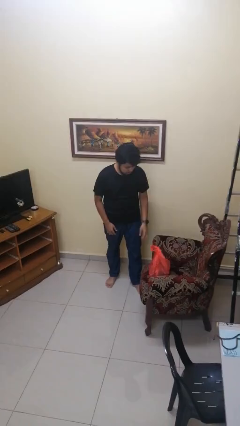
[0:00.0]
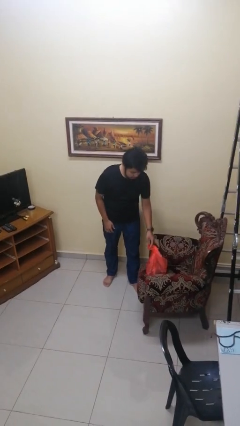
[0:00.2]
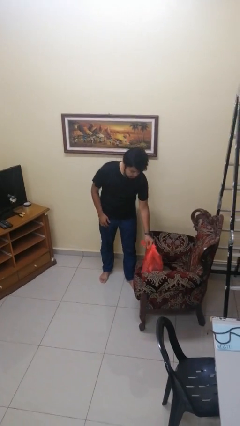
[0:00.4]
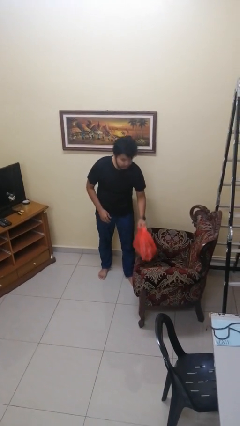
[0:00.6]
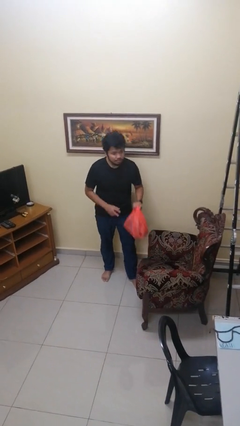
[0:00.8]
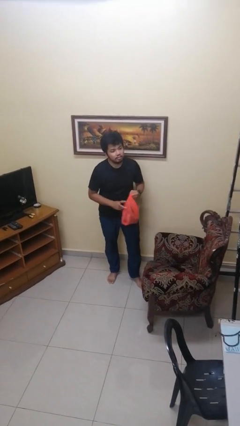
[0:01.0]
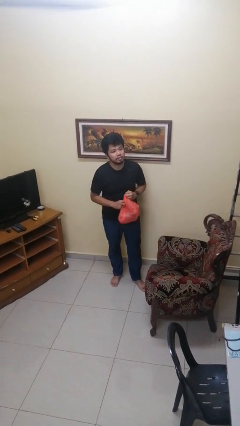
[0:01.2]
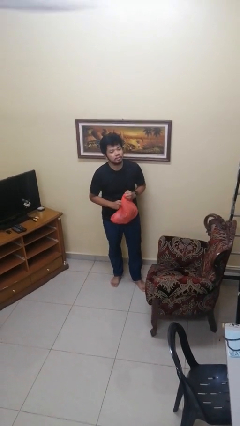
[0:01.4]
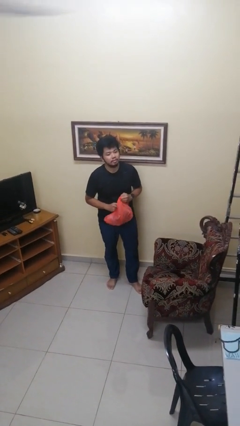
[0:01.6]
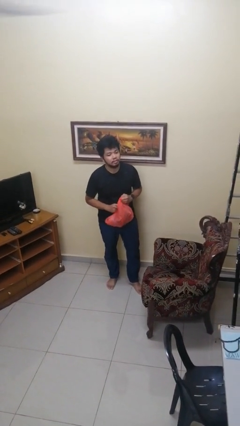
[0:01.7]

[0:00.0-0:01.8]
person picks up object from couch

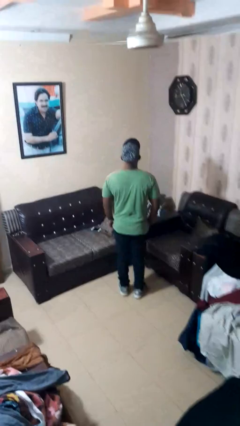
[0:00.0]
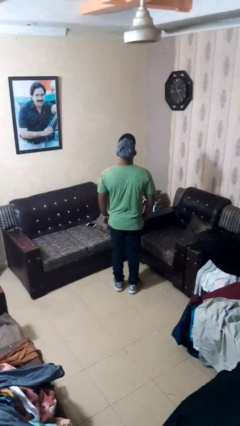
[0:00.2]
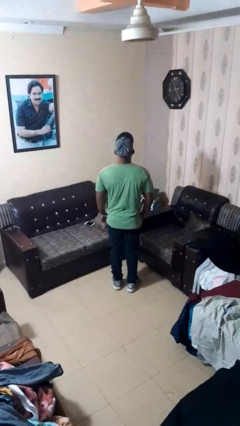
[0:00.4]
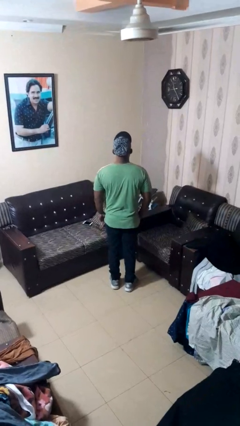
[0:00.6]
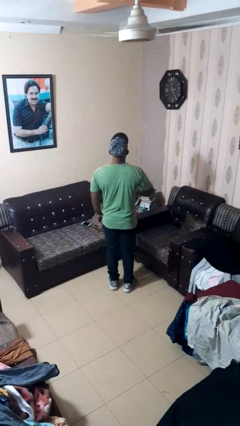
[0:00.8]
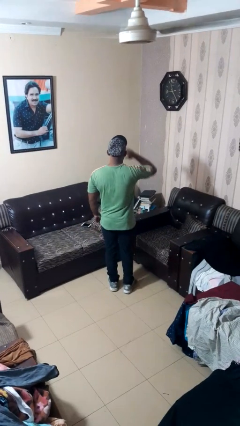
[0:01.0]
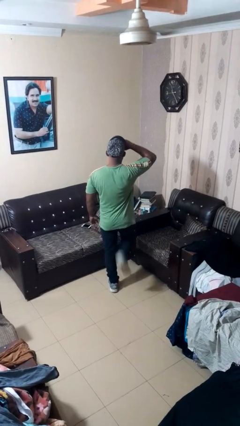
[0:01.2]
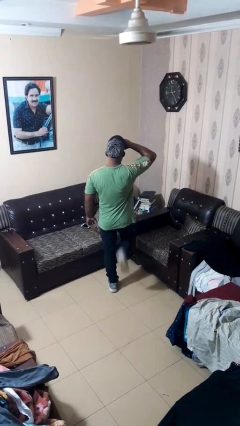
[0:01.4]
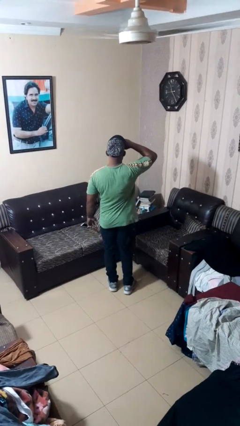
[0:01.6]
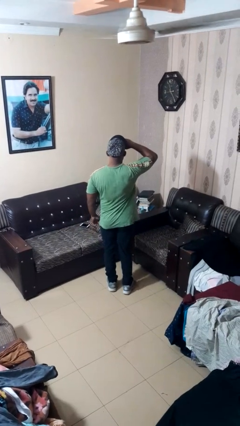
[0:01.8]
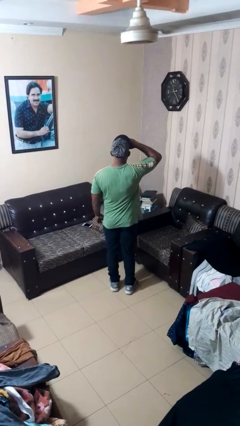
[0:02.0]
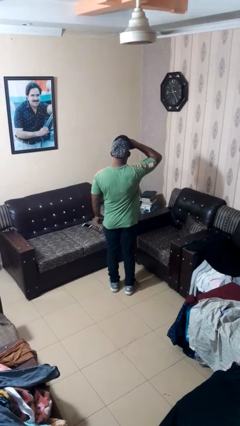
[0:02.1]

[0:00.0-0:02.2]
person salutes

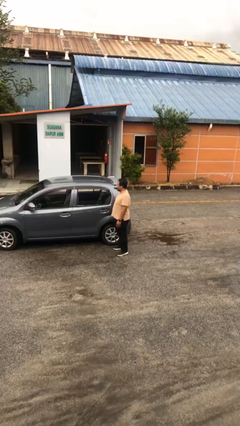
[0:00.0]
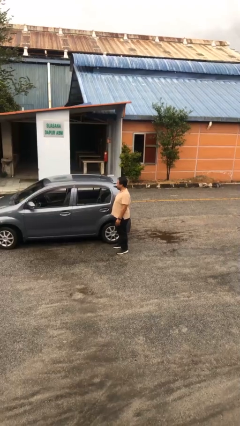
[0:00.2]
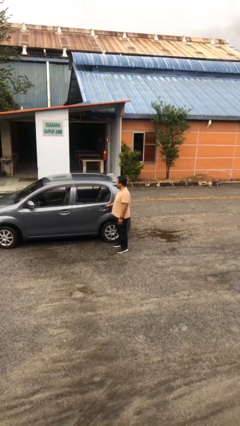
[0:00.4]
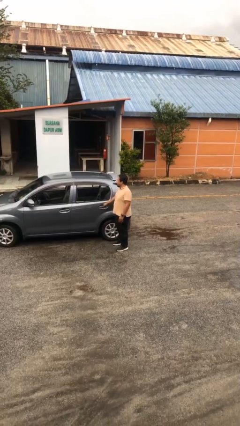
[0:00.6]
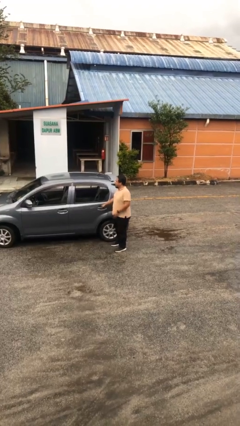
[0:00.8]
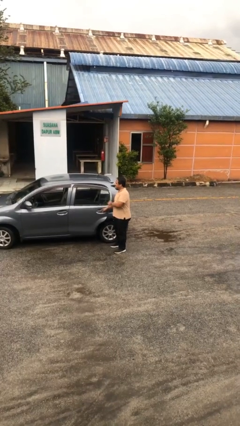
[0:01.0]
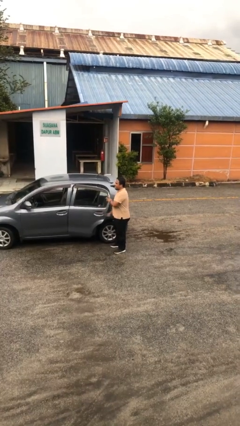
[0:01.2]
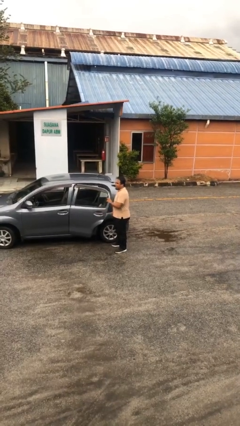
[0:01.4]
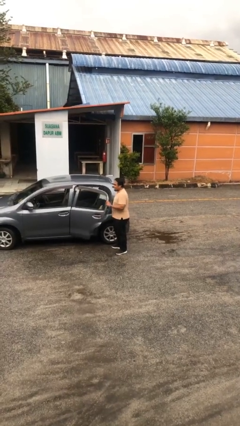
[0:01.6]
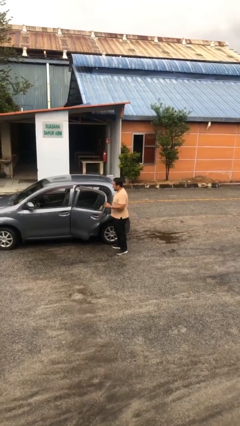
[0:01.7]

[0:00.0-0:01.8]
person opens car door

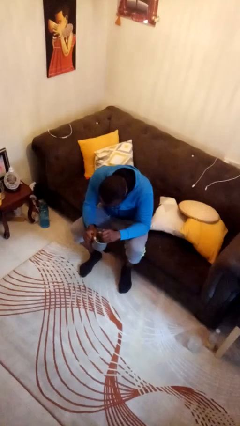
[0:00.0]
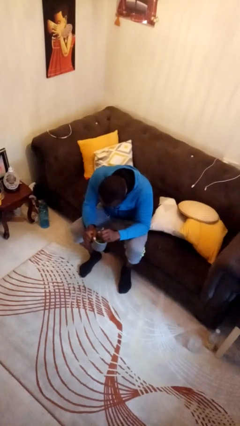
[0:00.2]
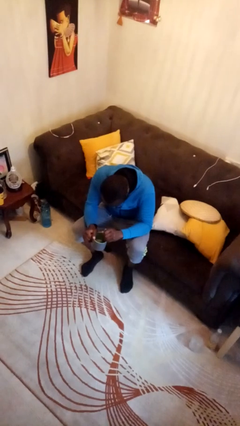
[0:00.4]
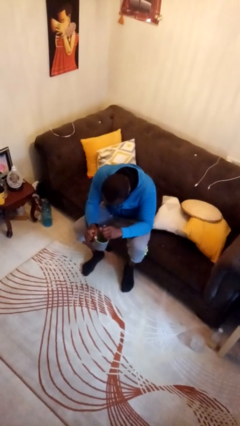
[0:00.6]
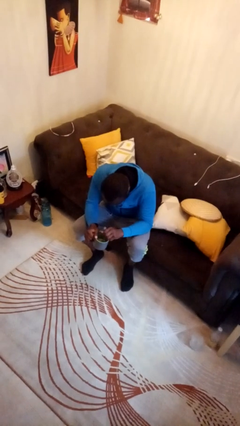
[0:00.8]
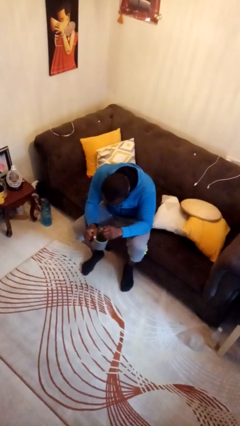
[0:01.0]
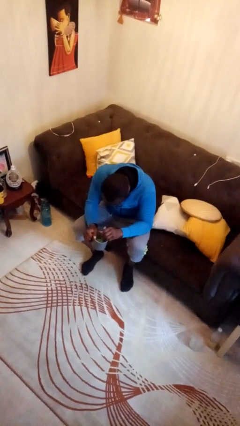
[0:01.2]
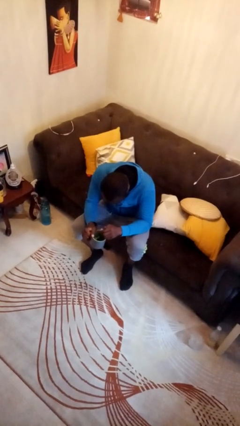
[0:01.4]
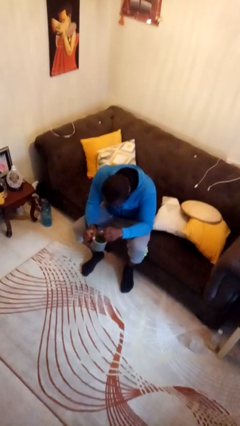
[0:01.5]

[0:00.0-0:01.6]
person stirs mug

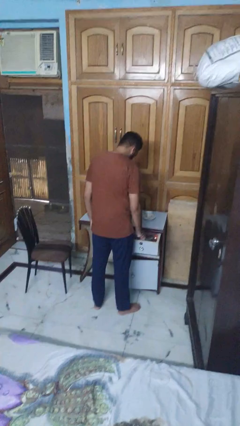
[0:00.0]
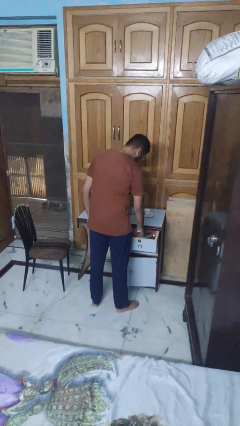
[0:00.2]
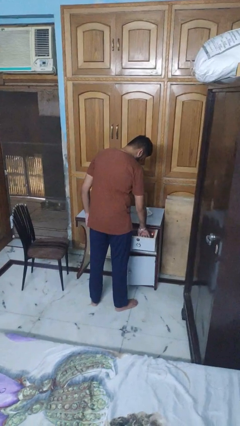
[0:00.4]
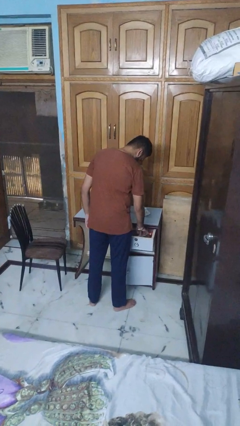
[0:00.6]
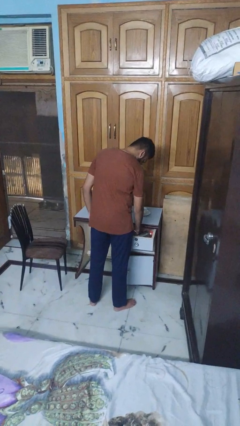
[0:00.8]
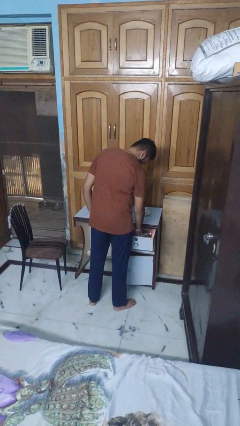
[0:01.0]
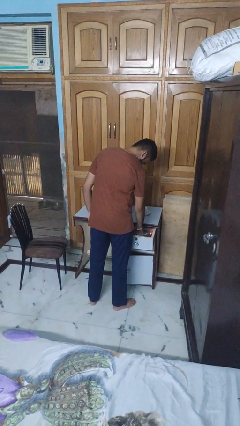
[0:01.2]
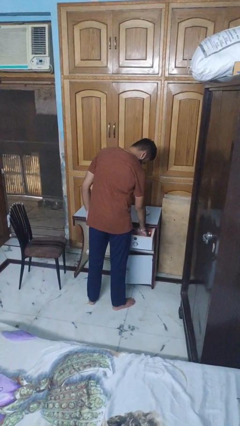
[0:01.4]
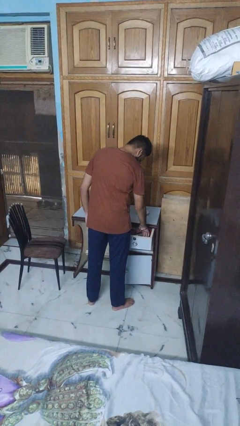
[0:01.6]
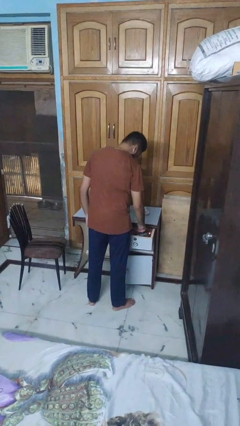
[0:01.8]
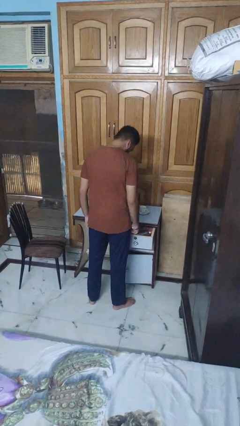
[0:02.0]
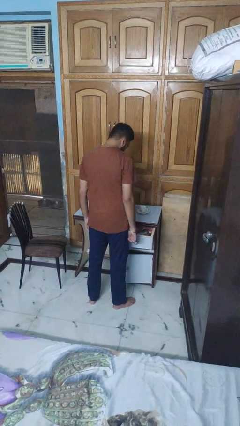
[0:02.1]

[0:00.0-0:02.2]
person searches in kitchen drawer

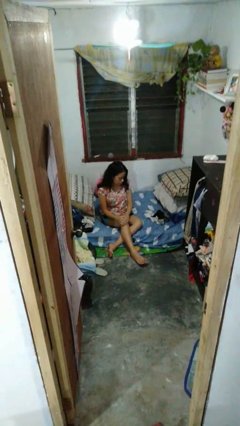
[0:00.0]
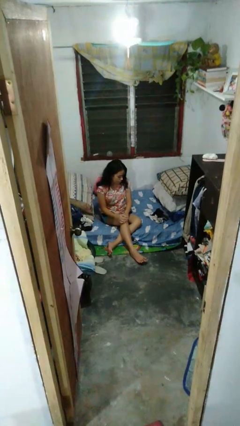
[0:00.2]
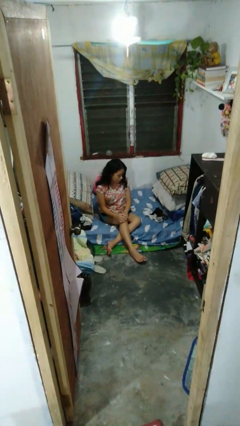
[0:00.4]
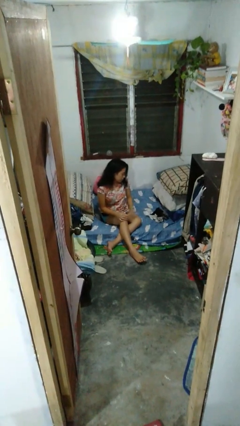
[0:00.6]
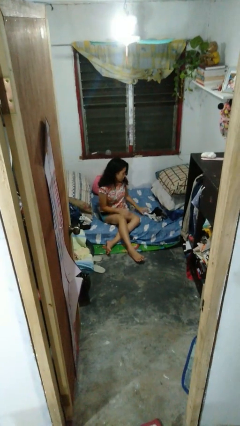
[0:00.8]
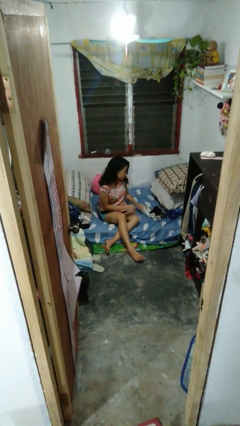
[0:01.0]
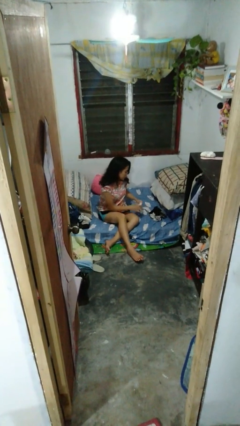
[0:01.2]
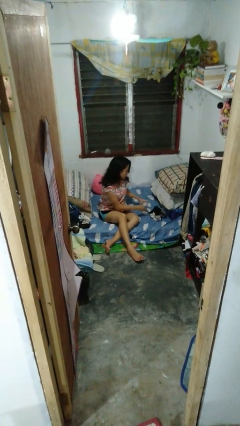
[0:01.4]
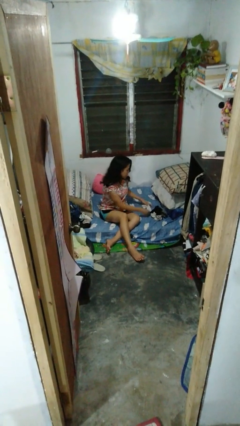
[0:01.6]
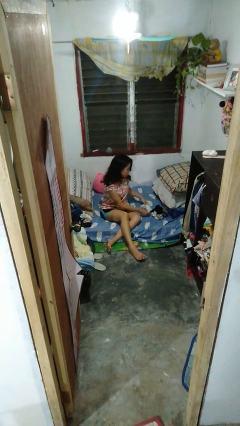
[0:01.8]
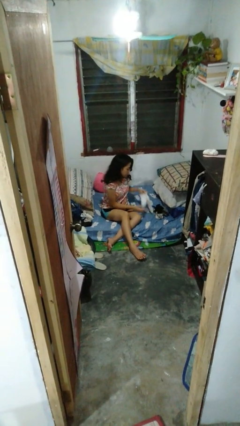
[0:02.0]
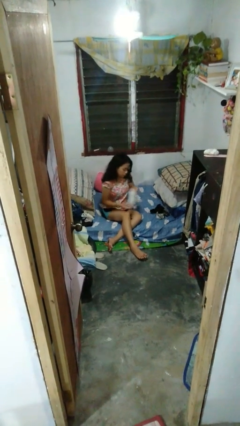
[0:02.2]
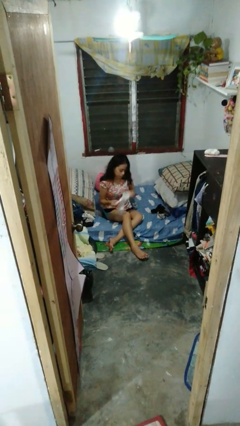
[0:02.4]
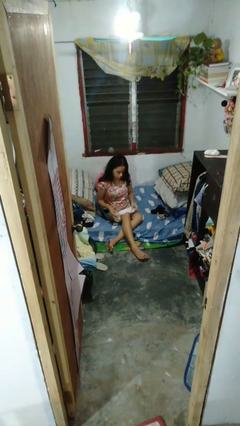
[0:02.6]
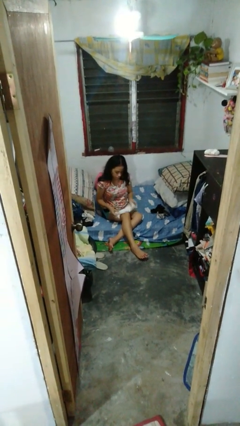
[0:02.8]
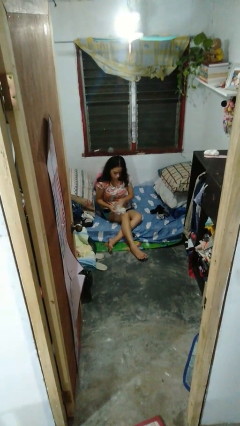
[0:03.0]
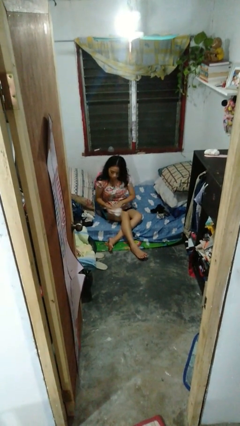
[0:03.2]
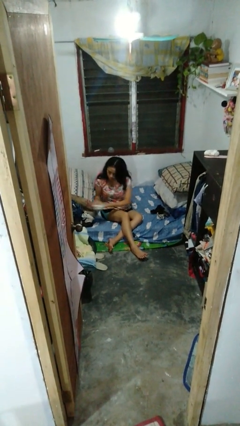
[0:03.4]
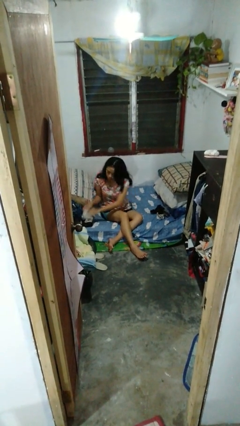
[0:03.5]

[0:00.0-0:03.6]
person folds socks

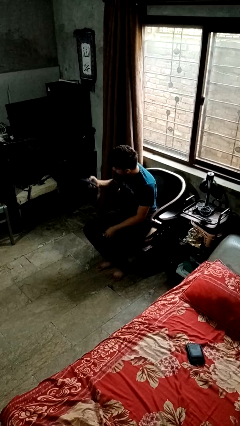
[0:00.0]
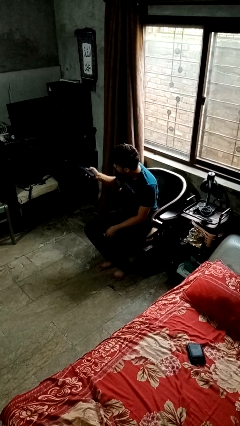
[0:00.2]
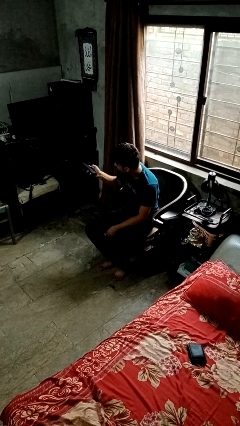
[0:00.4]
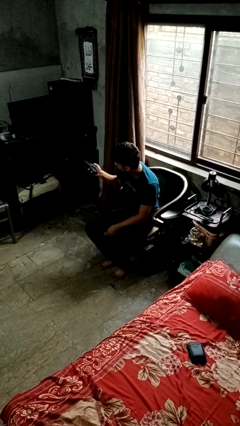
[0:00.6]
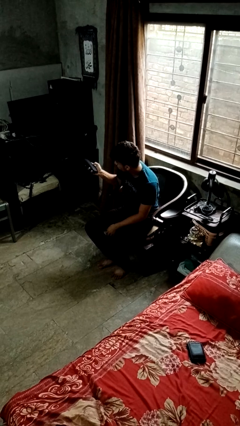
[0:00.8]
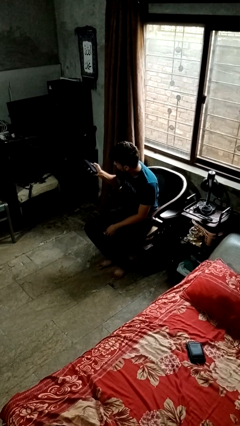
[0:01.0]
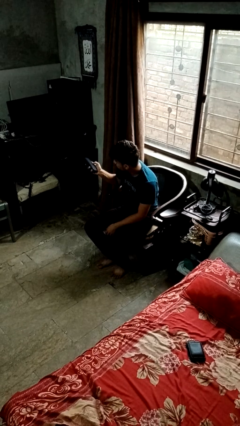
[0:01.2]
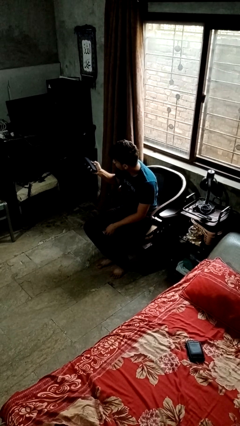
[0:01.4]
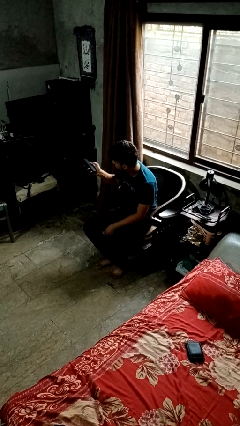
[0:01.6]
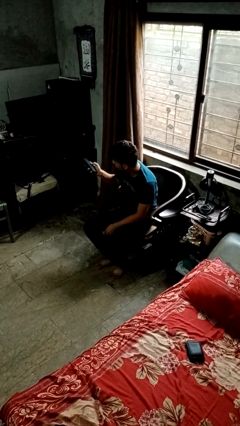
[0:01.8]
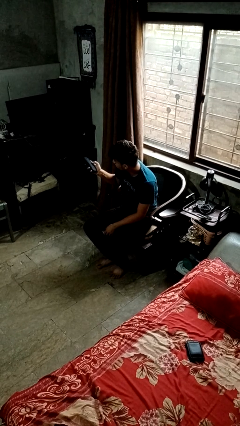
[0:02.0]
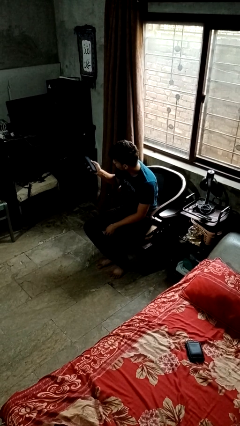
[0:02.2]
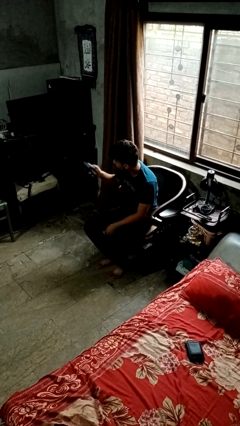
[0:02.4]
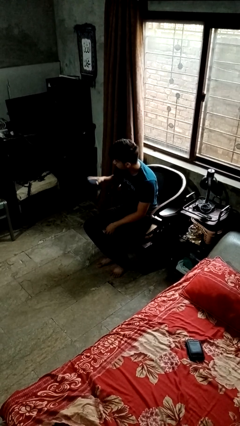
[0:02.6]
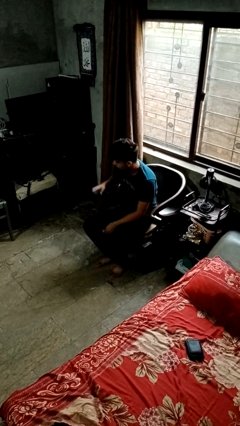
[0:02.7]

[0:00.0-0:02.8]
person uses television remote

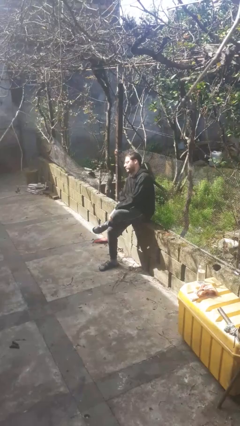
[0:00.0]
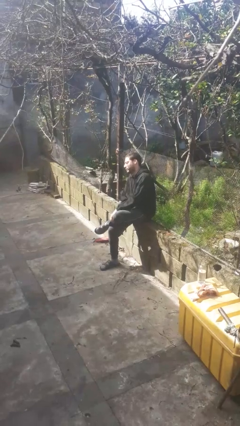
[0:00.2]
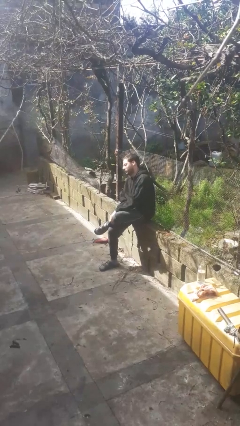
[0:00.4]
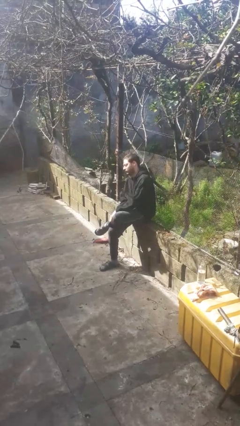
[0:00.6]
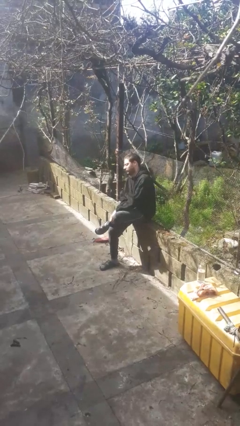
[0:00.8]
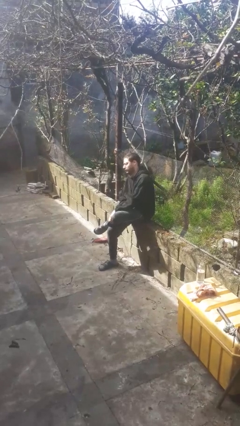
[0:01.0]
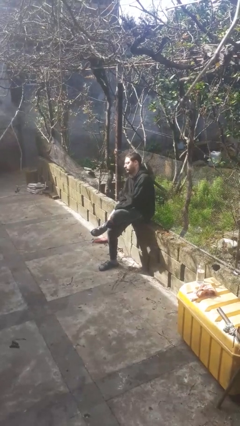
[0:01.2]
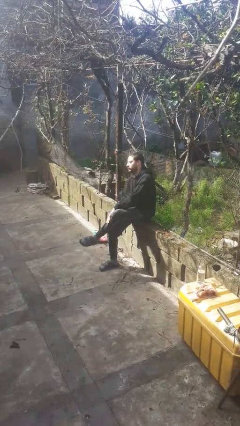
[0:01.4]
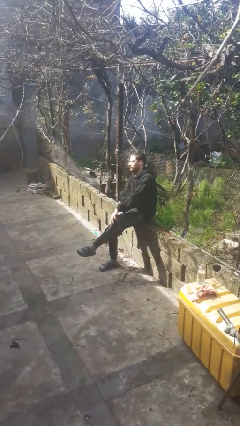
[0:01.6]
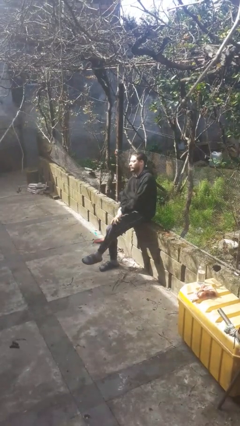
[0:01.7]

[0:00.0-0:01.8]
person crosses legs
